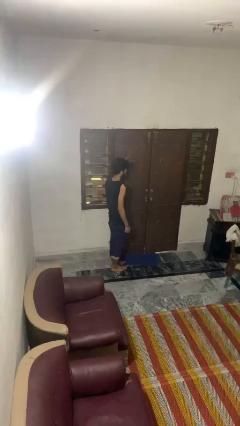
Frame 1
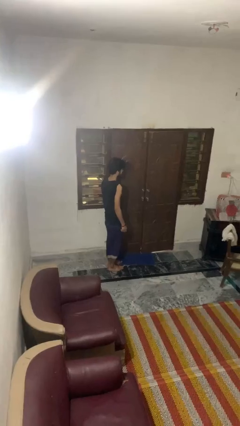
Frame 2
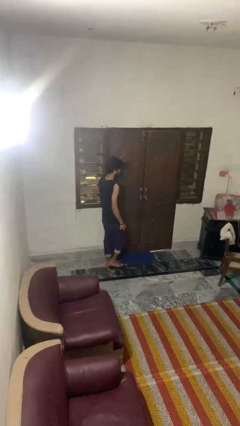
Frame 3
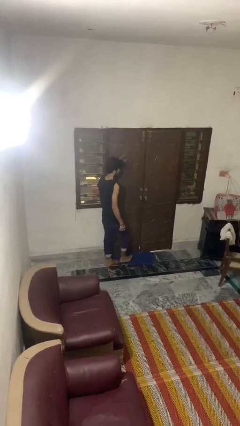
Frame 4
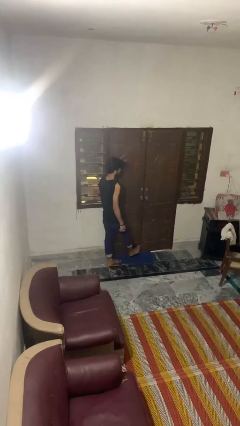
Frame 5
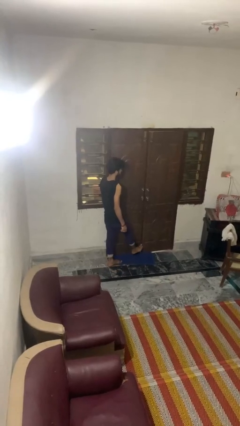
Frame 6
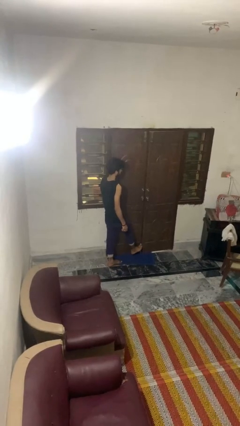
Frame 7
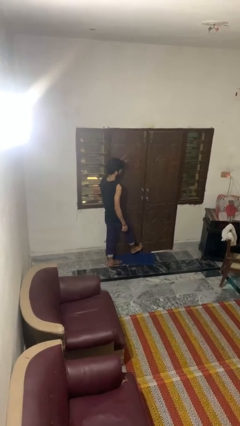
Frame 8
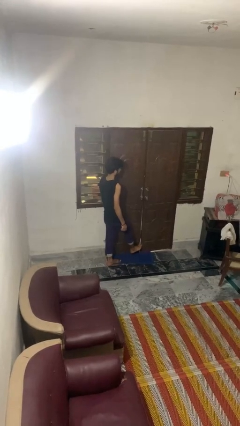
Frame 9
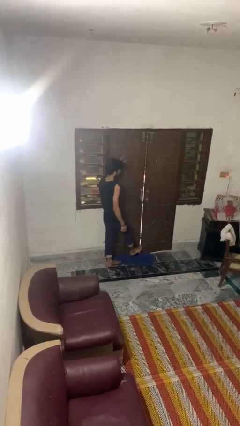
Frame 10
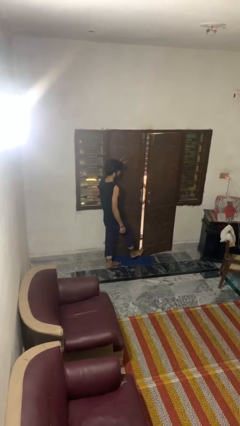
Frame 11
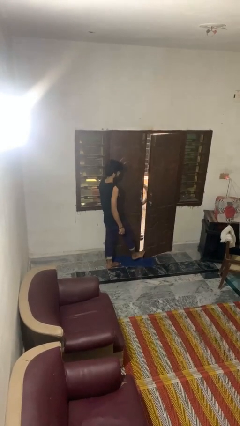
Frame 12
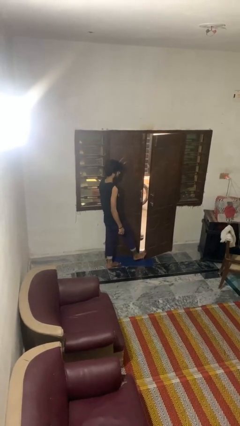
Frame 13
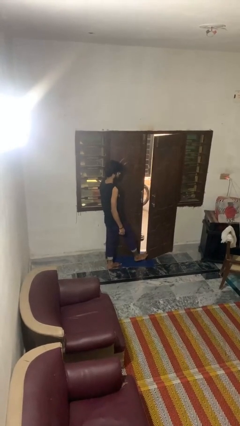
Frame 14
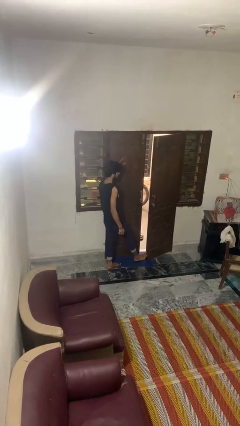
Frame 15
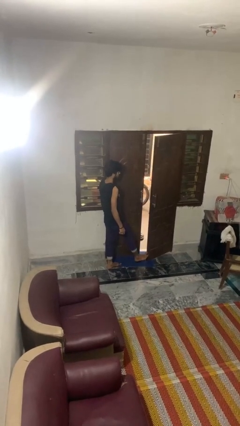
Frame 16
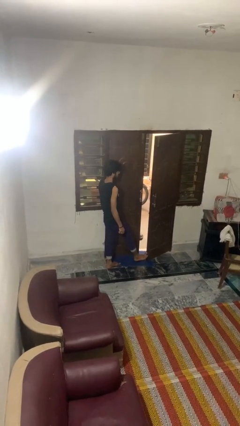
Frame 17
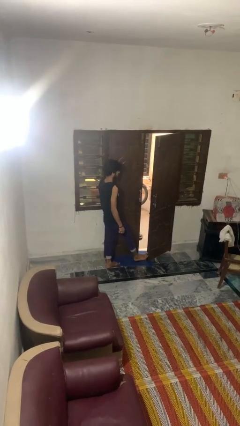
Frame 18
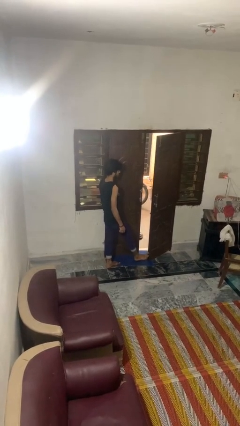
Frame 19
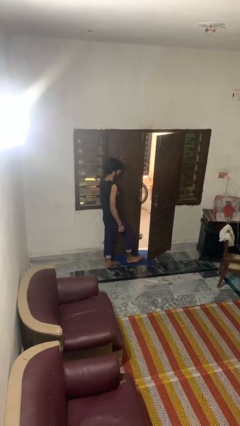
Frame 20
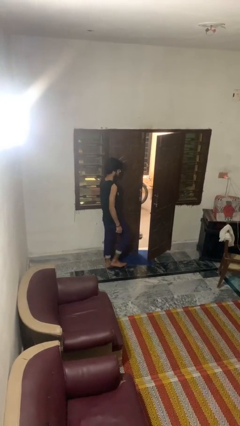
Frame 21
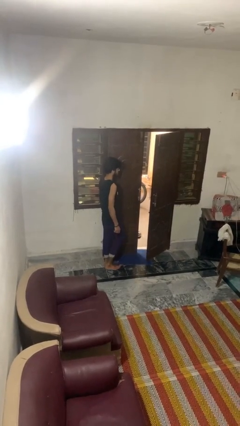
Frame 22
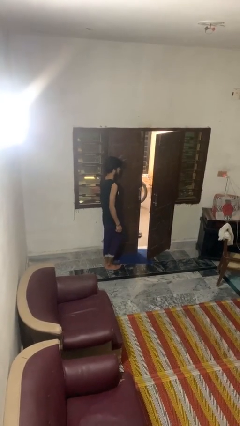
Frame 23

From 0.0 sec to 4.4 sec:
person opens facility door

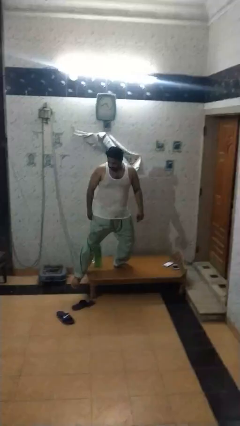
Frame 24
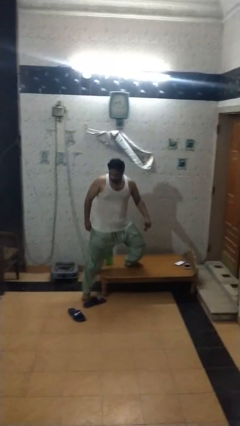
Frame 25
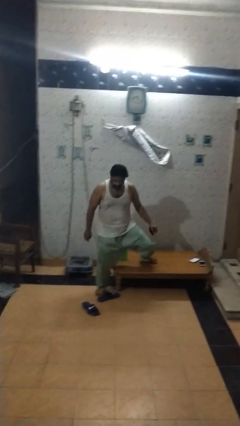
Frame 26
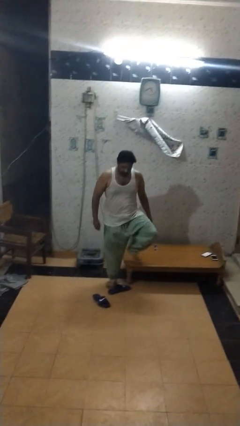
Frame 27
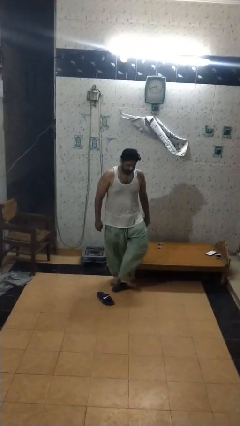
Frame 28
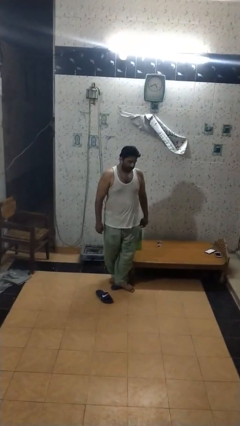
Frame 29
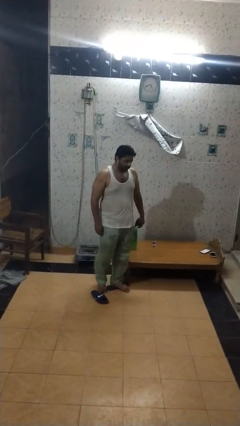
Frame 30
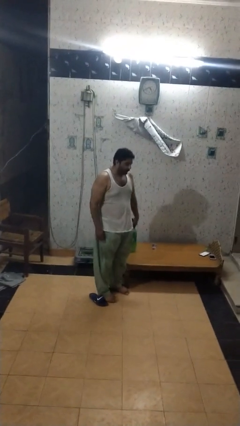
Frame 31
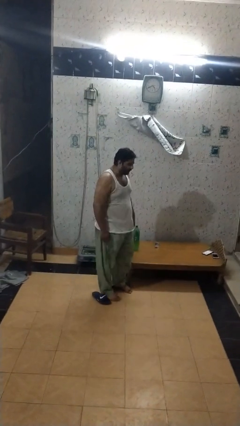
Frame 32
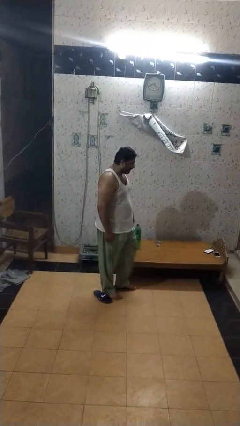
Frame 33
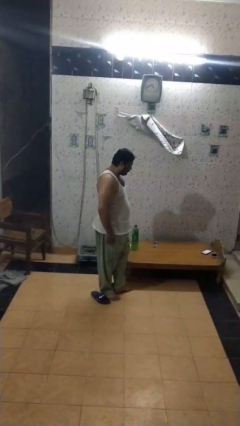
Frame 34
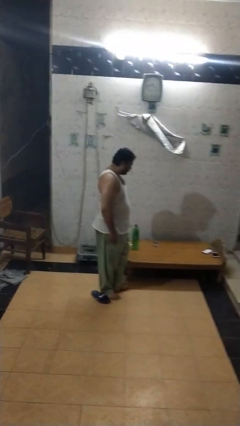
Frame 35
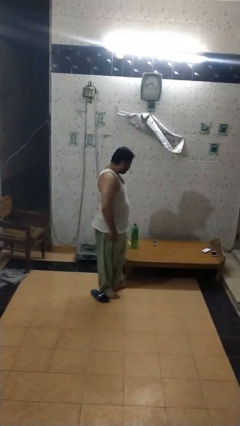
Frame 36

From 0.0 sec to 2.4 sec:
person climbs off table

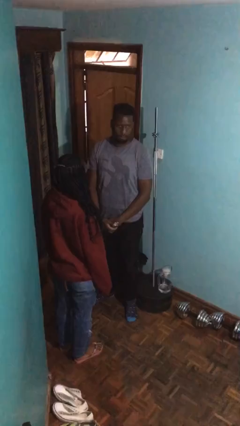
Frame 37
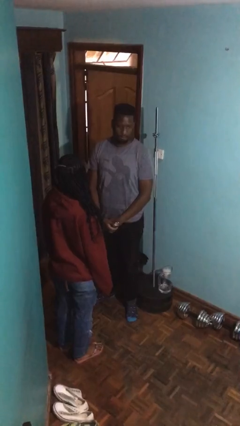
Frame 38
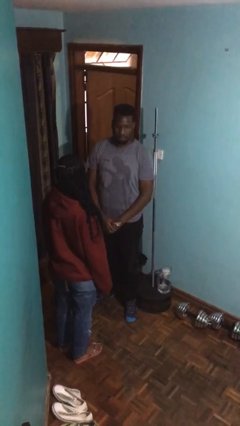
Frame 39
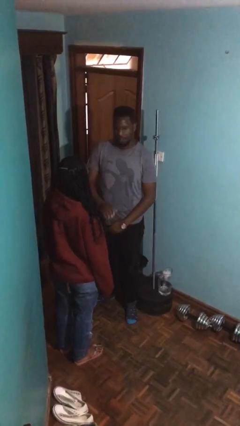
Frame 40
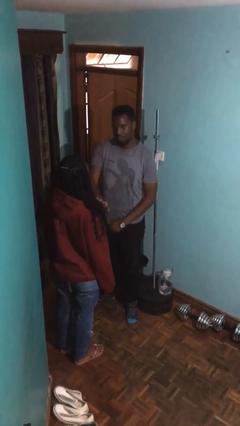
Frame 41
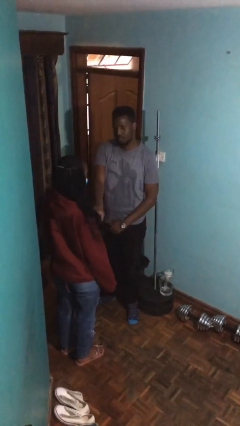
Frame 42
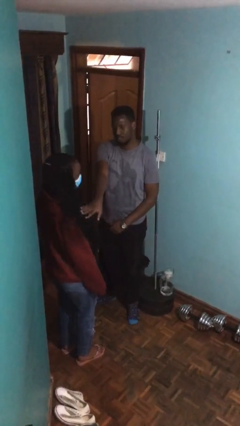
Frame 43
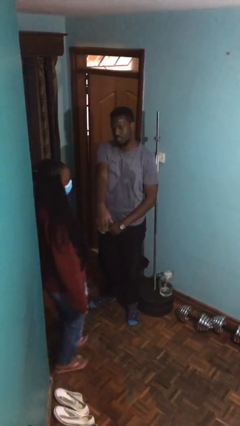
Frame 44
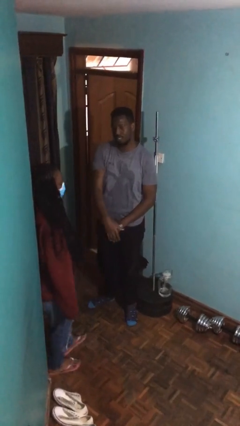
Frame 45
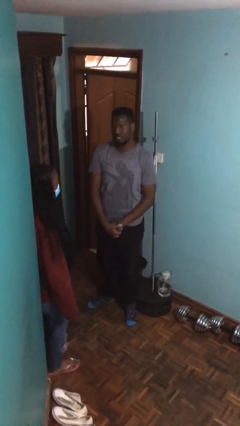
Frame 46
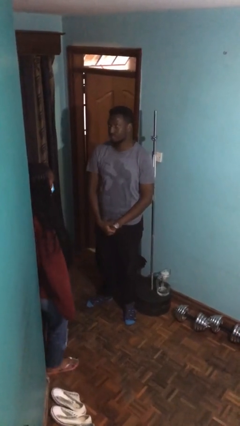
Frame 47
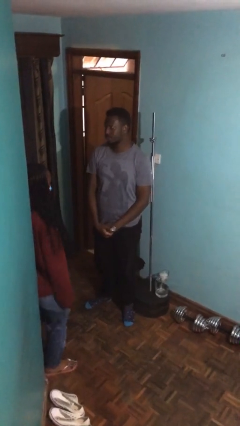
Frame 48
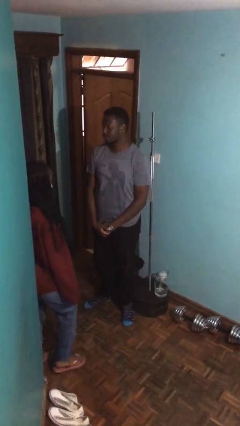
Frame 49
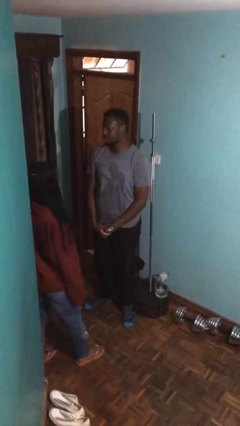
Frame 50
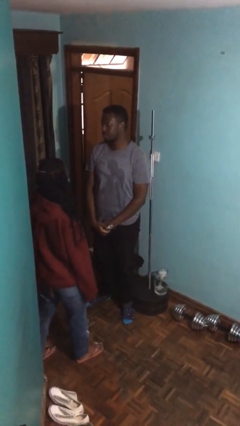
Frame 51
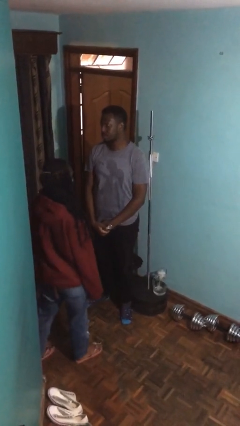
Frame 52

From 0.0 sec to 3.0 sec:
person shoves person

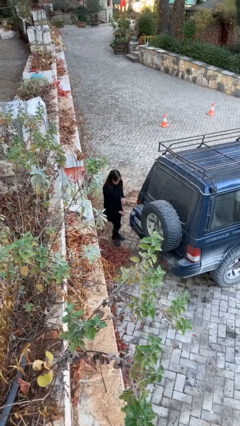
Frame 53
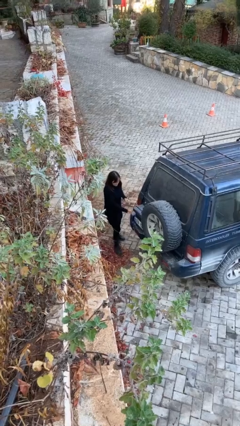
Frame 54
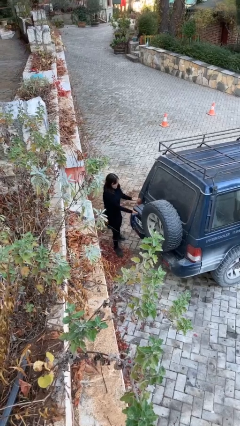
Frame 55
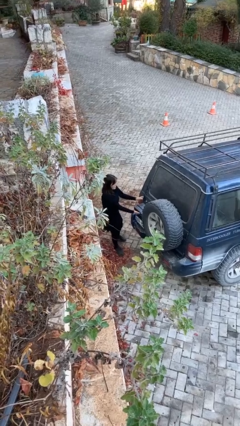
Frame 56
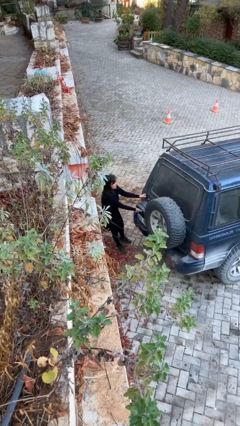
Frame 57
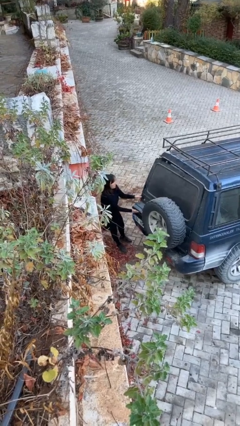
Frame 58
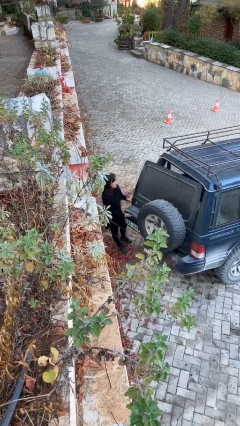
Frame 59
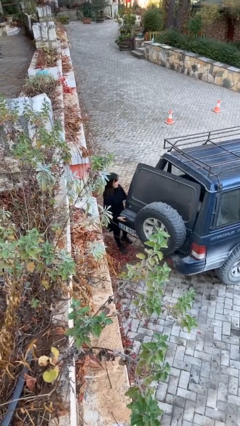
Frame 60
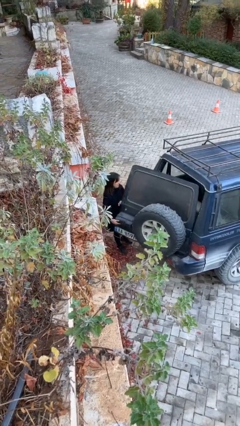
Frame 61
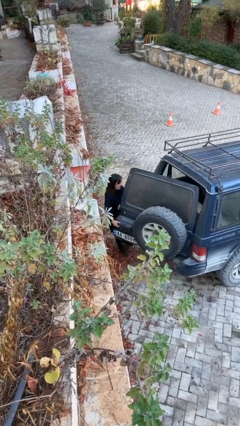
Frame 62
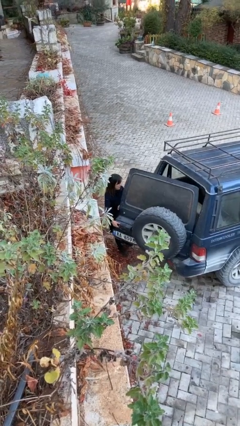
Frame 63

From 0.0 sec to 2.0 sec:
person opens car trunk

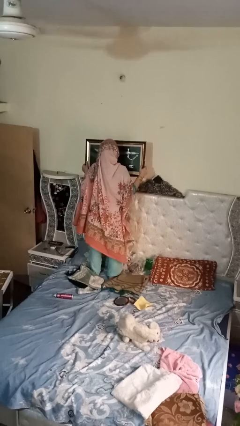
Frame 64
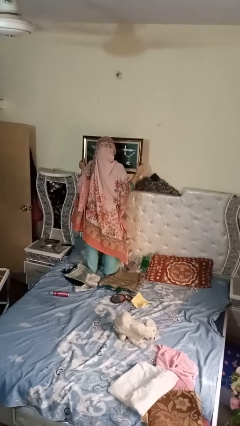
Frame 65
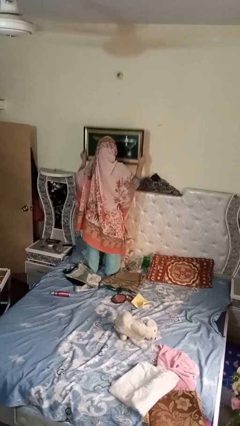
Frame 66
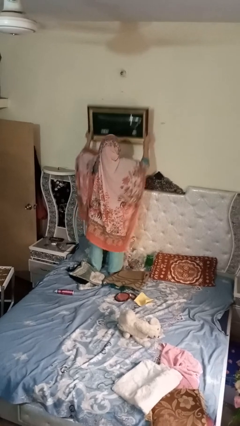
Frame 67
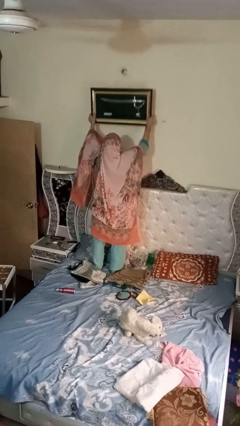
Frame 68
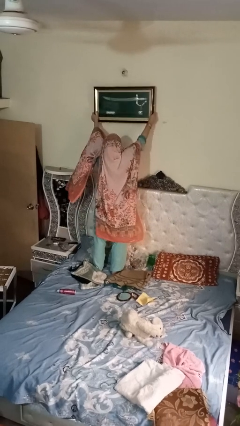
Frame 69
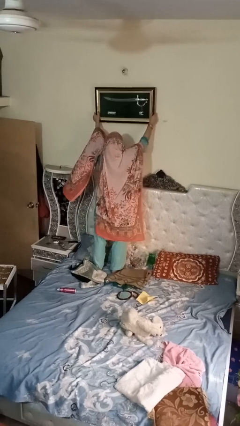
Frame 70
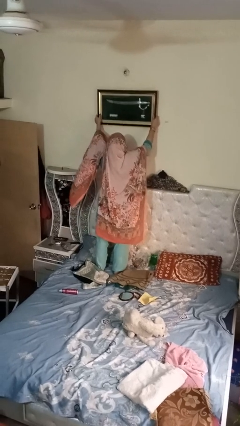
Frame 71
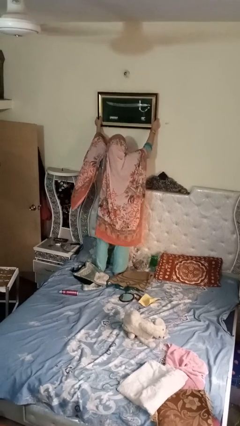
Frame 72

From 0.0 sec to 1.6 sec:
person takes down picture frame

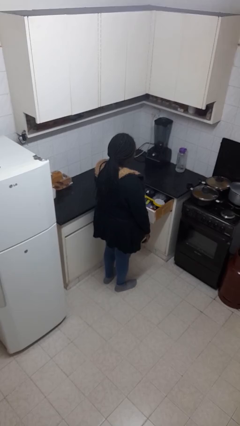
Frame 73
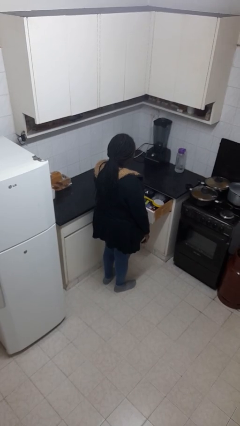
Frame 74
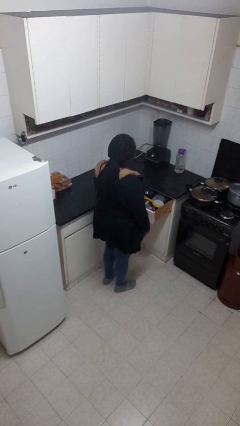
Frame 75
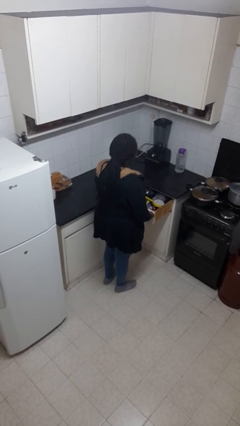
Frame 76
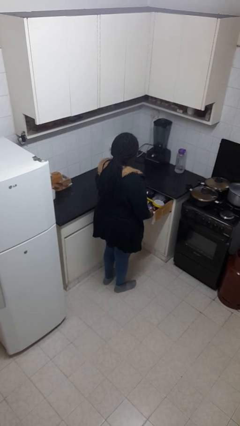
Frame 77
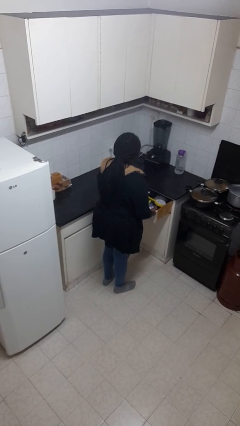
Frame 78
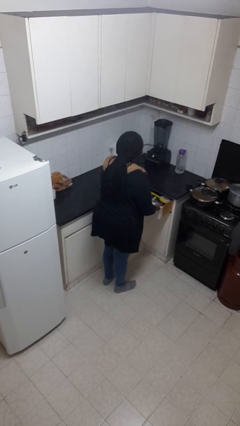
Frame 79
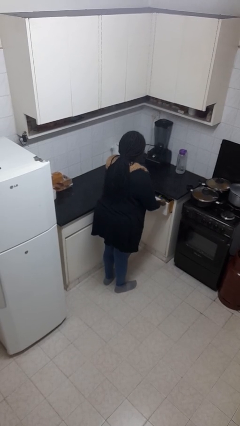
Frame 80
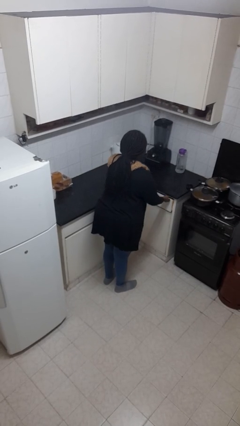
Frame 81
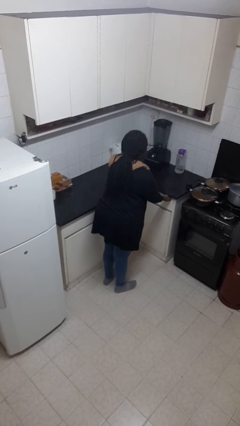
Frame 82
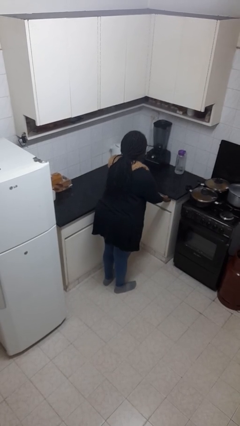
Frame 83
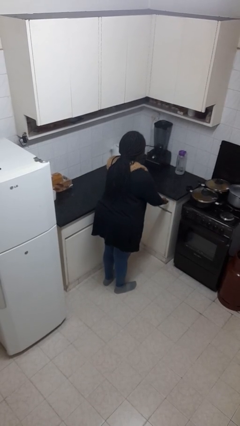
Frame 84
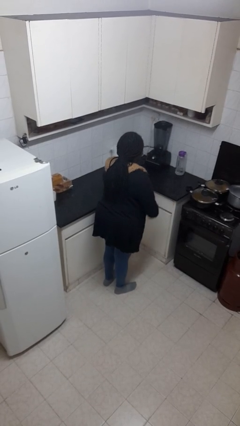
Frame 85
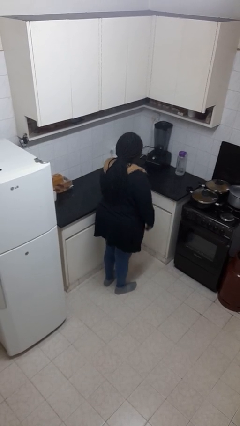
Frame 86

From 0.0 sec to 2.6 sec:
person closes kitchen drawer

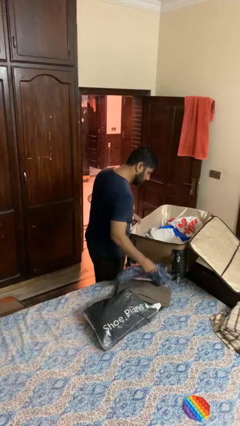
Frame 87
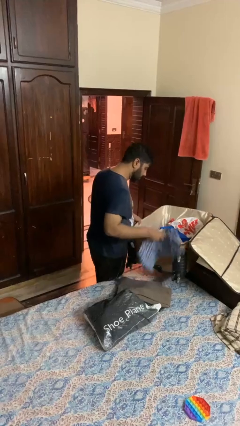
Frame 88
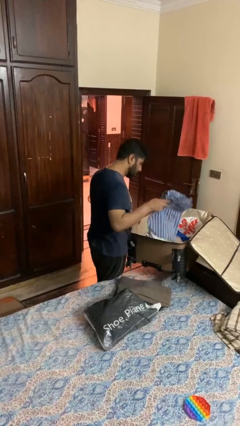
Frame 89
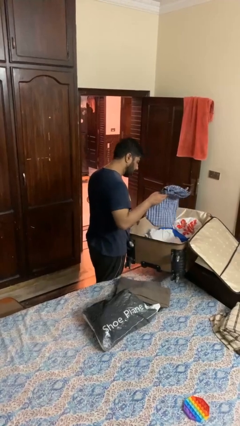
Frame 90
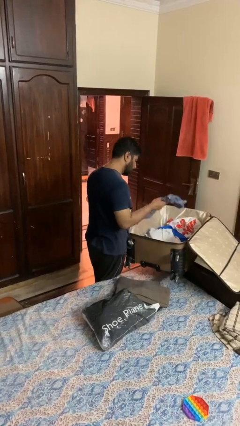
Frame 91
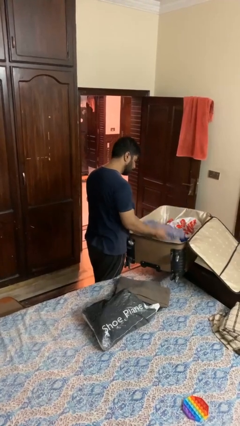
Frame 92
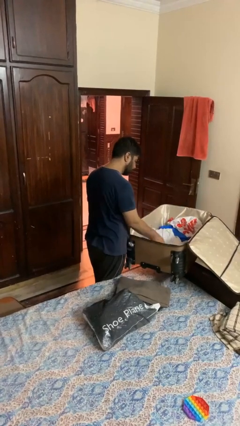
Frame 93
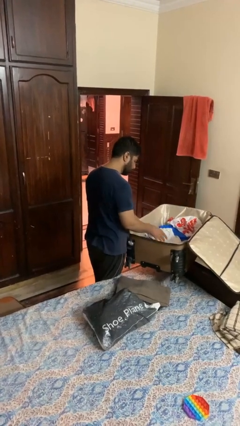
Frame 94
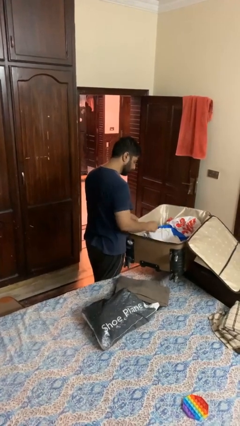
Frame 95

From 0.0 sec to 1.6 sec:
person loads clothes into suitcase
